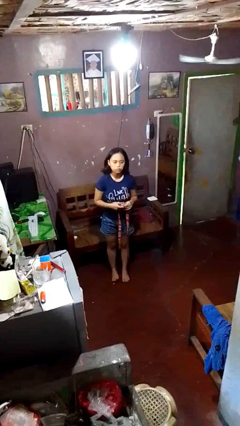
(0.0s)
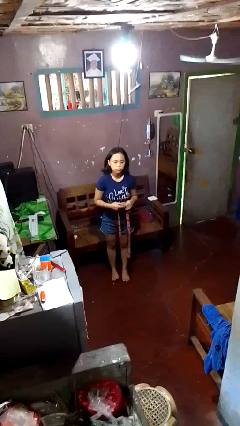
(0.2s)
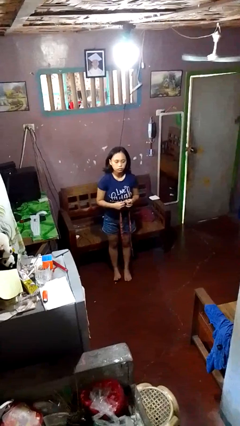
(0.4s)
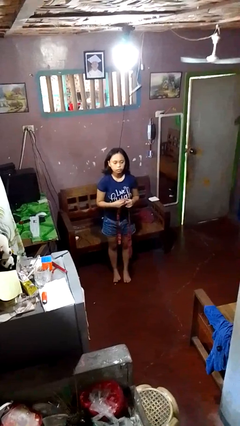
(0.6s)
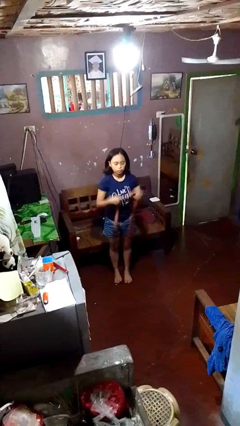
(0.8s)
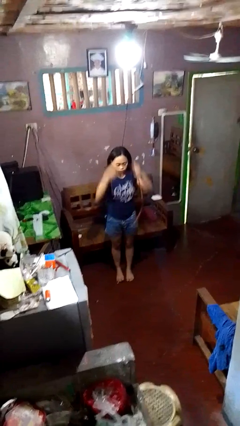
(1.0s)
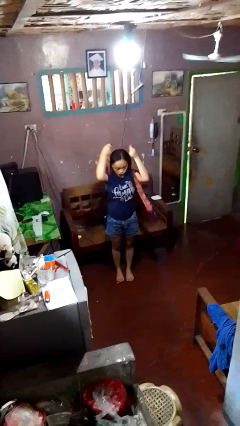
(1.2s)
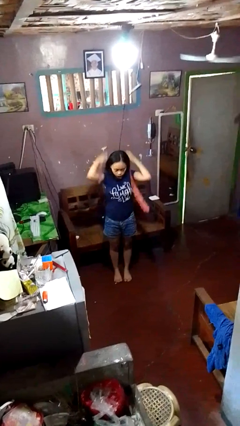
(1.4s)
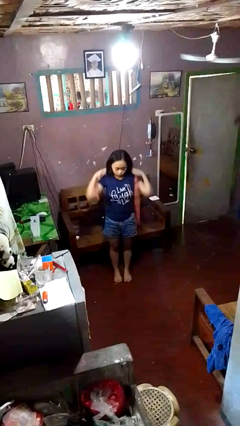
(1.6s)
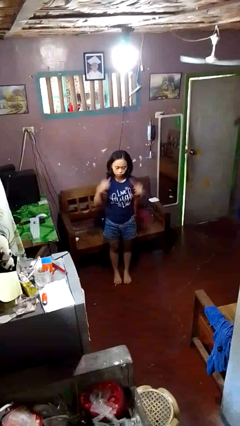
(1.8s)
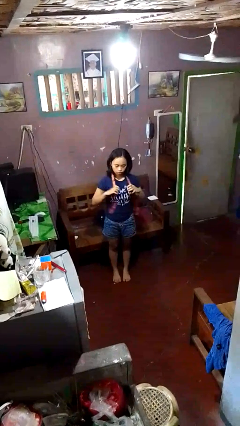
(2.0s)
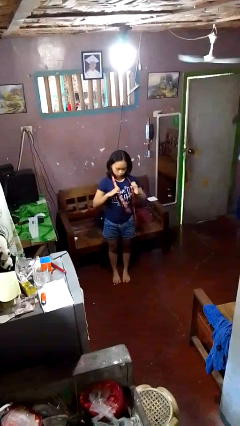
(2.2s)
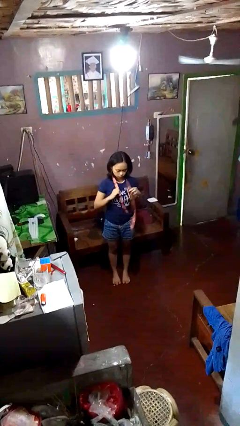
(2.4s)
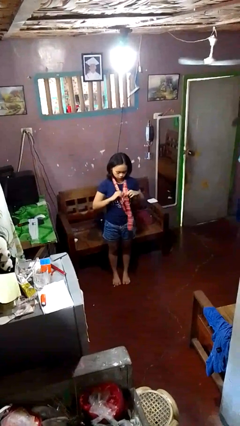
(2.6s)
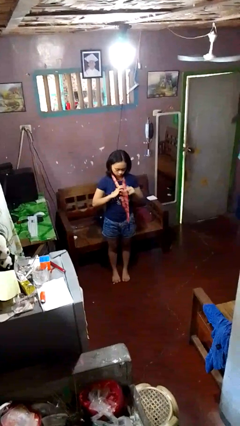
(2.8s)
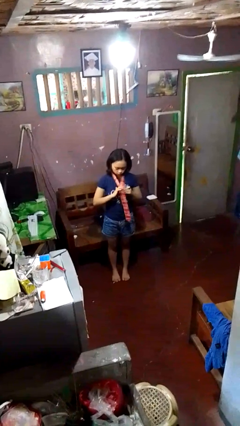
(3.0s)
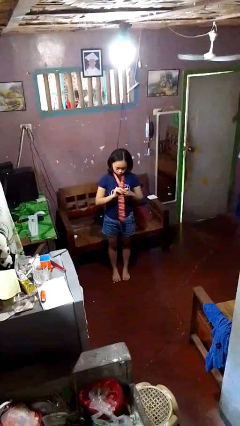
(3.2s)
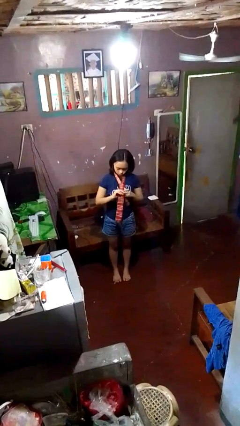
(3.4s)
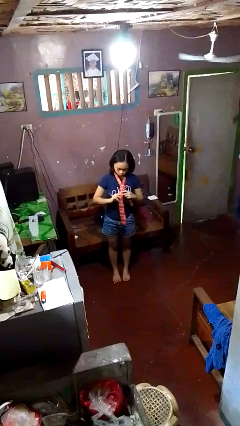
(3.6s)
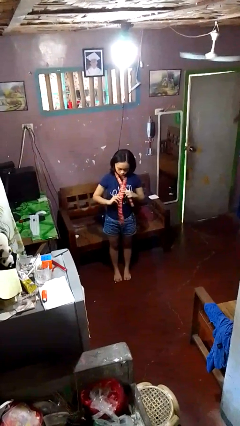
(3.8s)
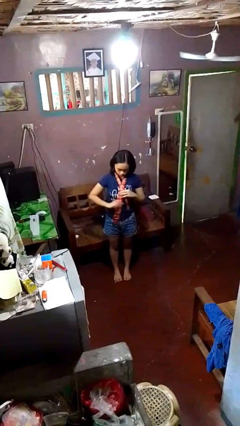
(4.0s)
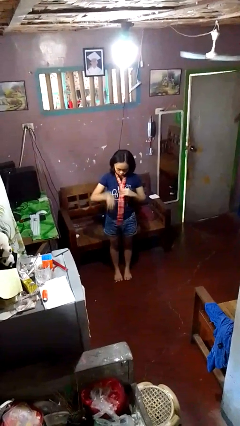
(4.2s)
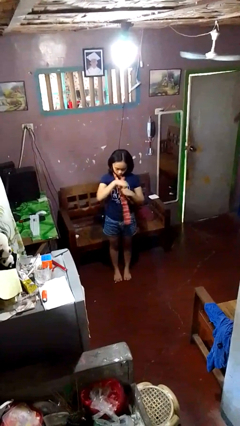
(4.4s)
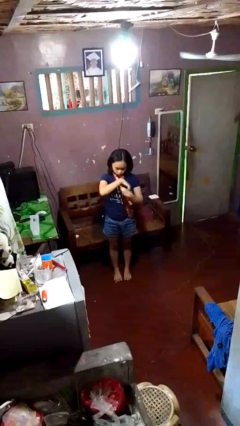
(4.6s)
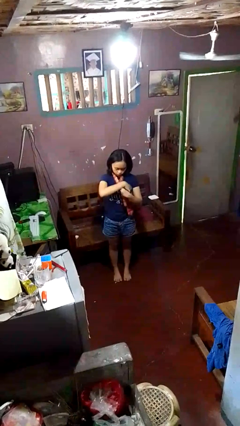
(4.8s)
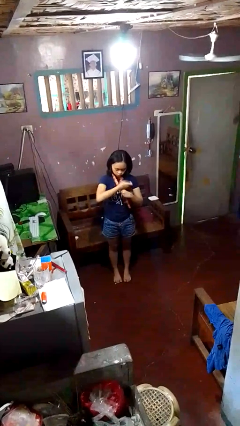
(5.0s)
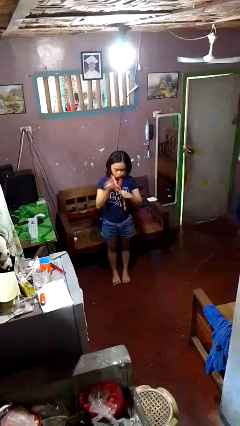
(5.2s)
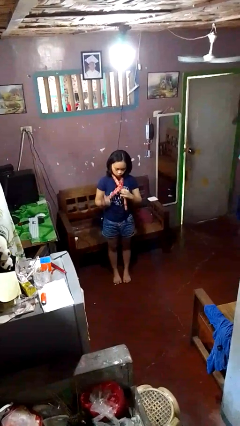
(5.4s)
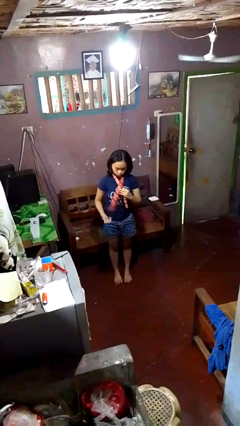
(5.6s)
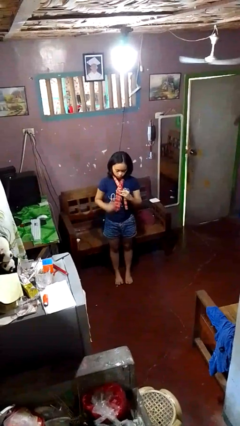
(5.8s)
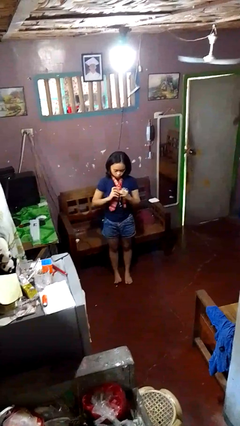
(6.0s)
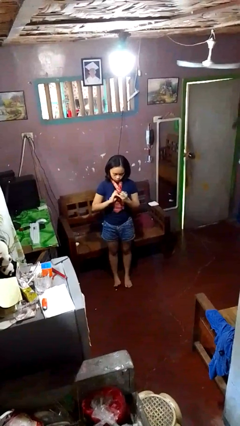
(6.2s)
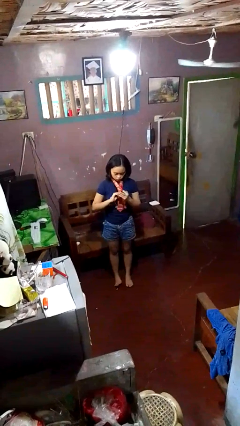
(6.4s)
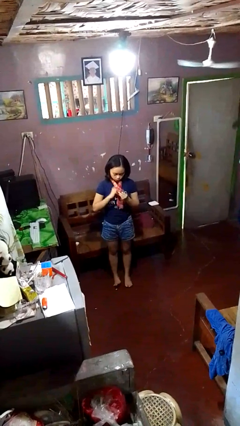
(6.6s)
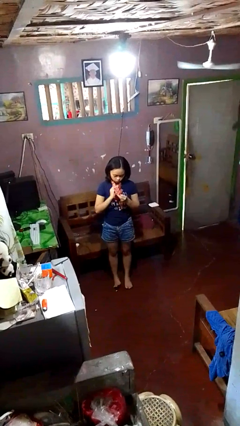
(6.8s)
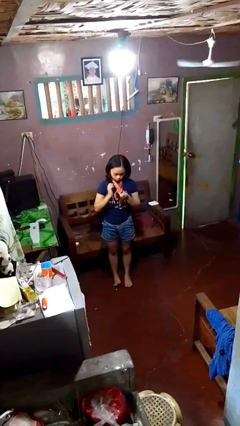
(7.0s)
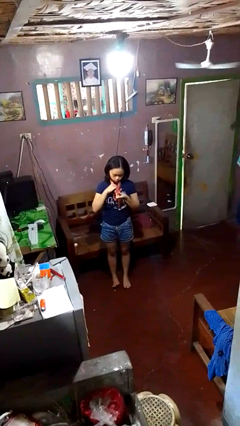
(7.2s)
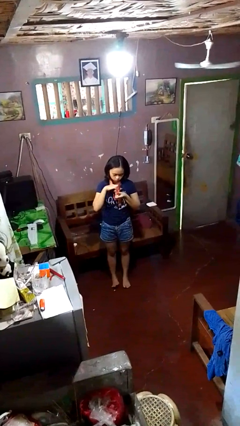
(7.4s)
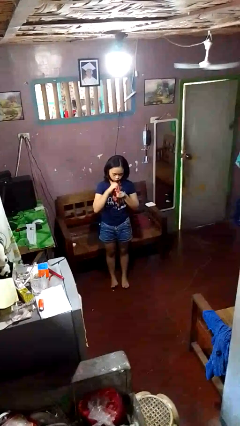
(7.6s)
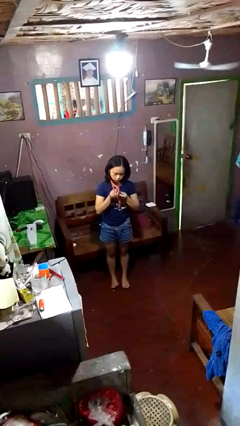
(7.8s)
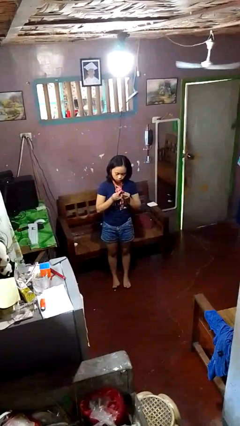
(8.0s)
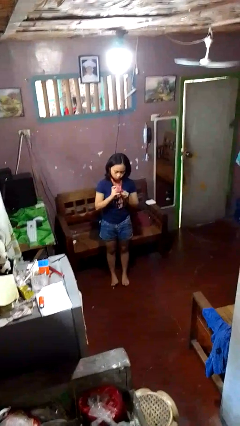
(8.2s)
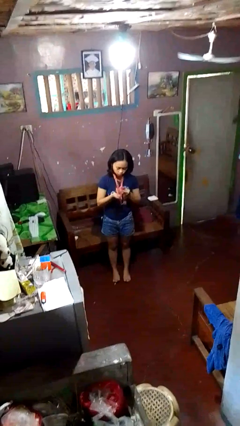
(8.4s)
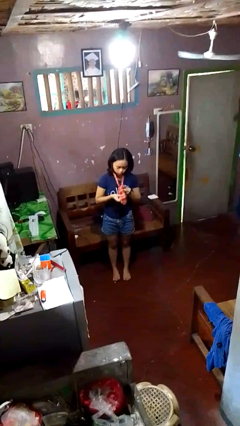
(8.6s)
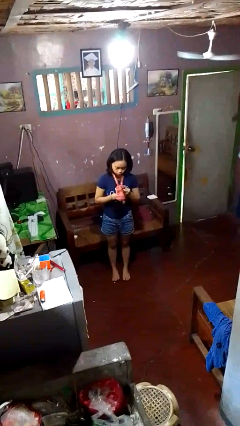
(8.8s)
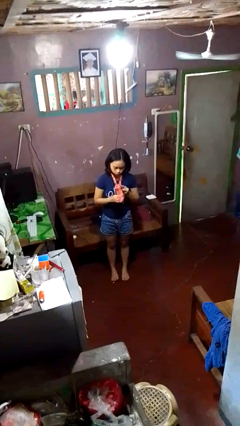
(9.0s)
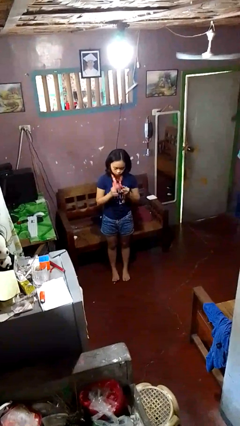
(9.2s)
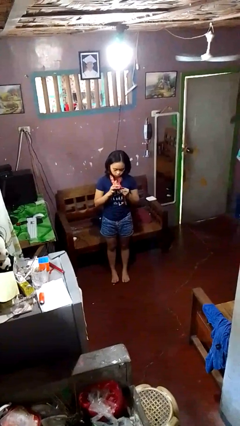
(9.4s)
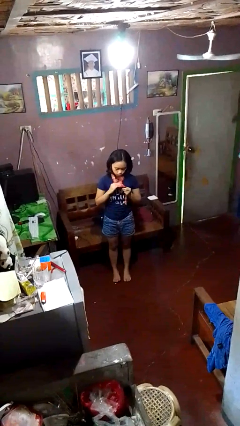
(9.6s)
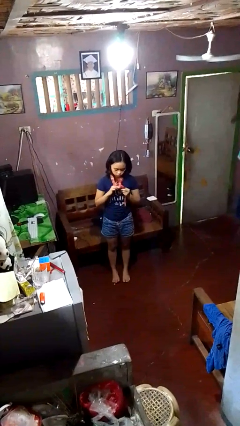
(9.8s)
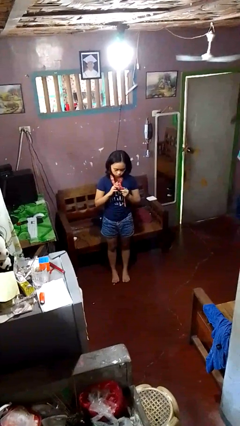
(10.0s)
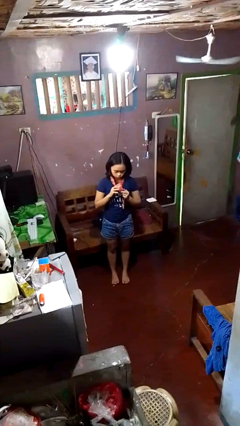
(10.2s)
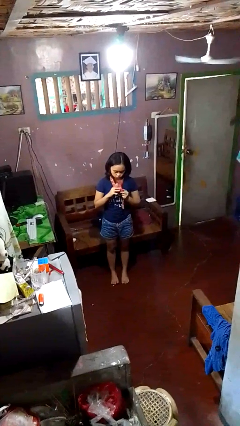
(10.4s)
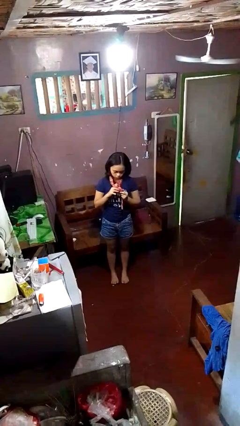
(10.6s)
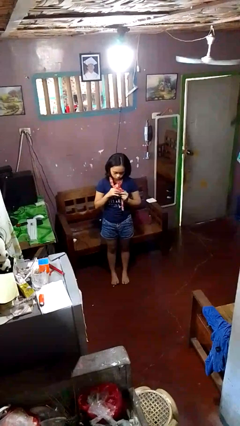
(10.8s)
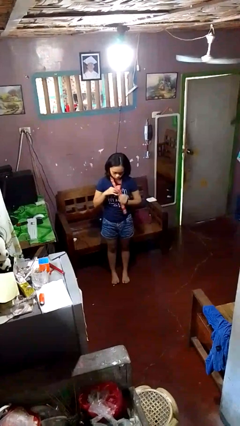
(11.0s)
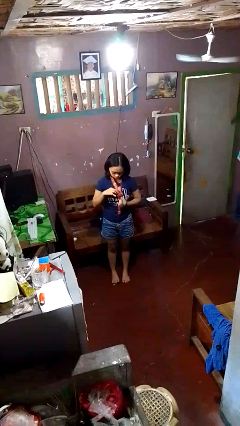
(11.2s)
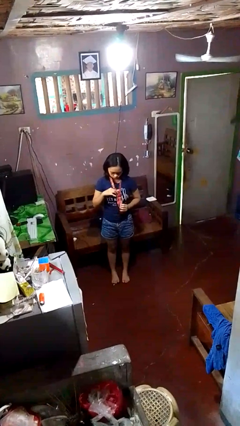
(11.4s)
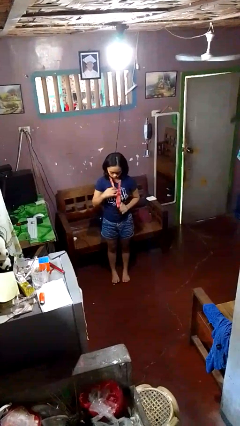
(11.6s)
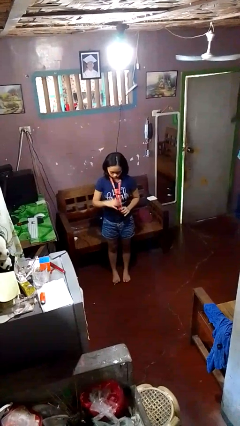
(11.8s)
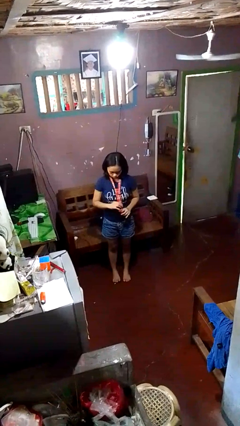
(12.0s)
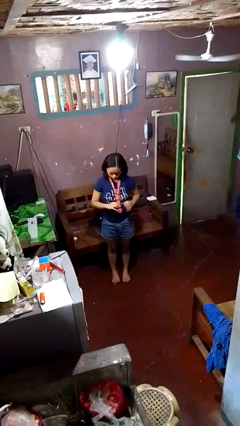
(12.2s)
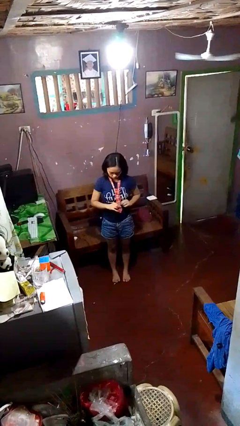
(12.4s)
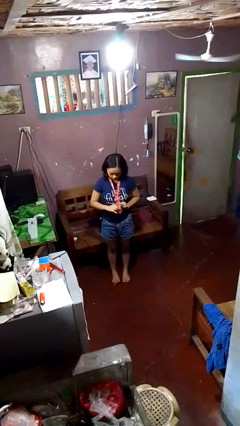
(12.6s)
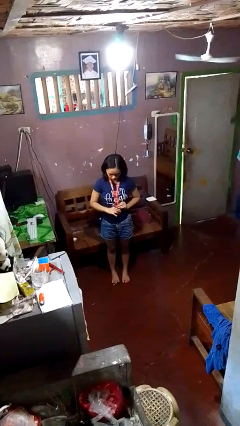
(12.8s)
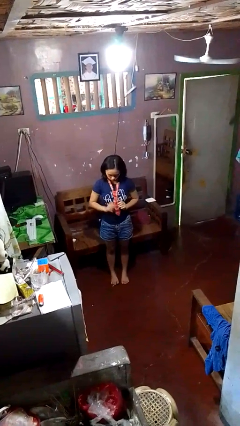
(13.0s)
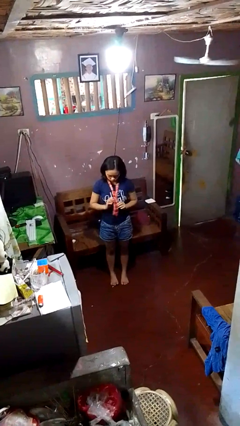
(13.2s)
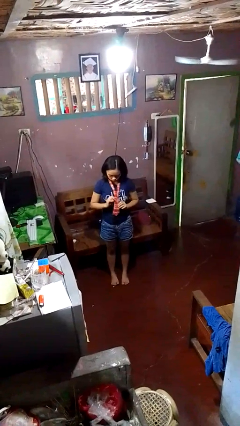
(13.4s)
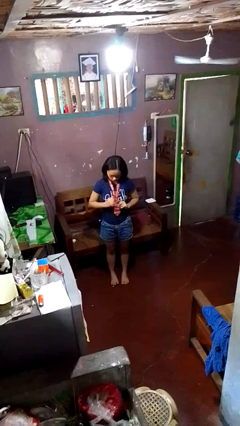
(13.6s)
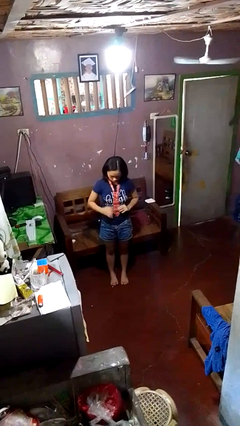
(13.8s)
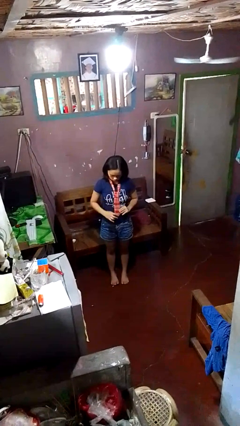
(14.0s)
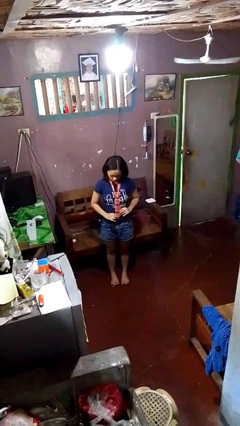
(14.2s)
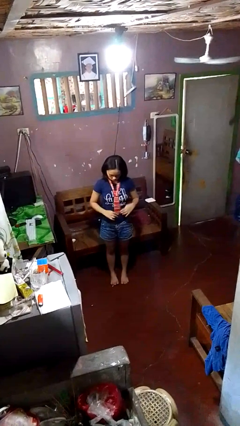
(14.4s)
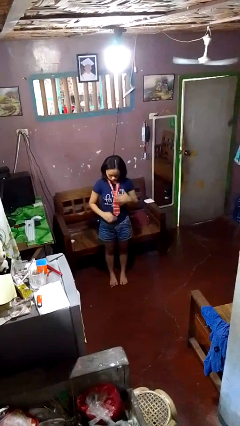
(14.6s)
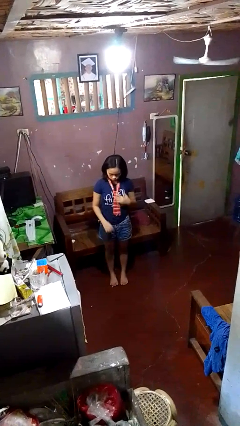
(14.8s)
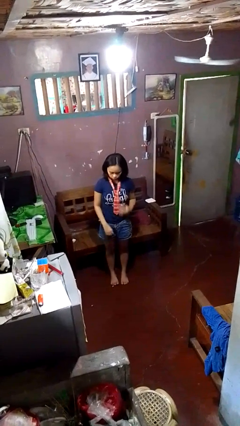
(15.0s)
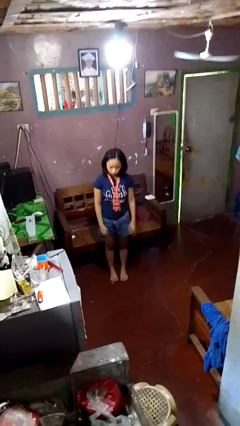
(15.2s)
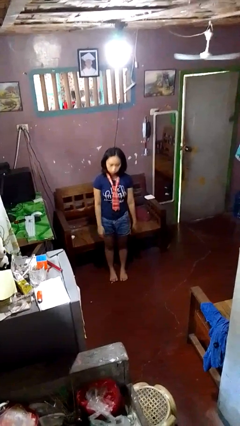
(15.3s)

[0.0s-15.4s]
person puts on necktie

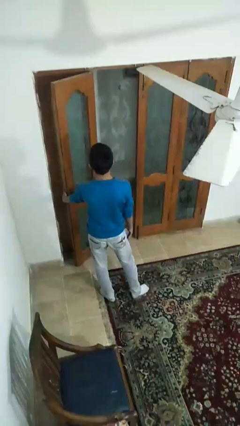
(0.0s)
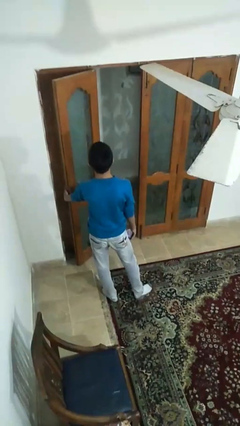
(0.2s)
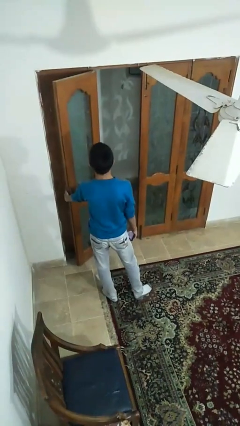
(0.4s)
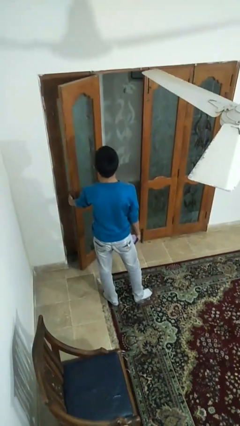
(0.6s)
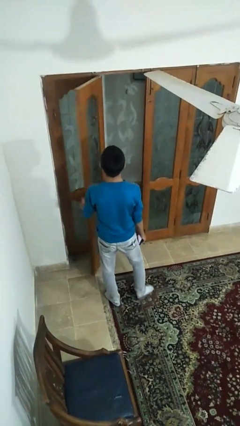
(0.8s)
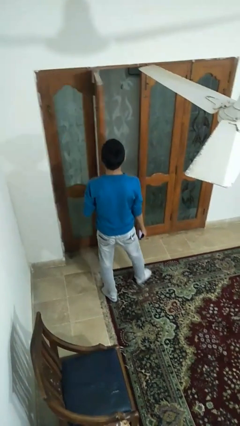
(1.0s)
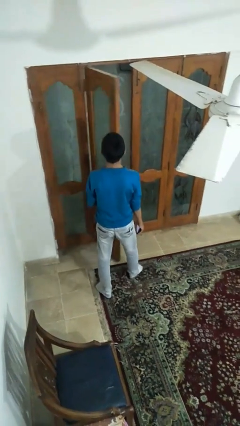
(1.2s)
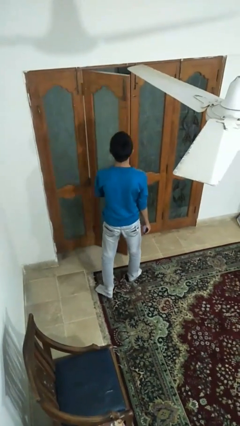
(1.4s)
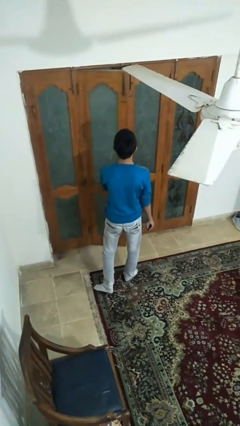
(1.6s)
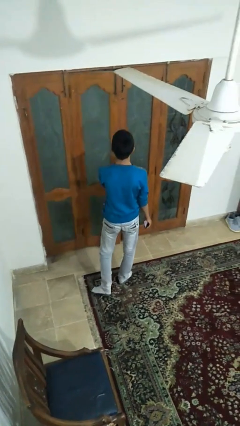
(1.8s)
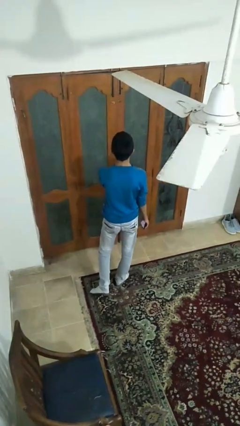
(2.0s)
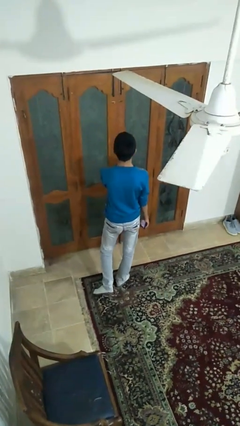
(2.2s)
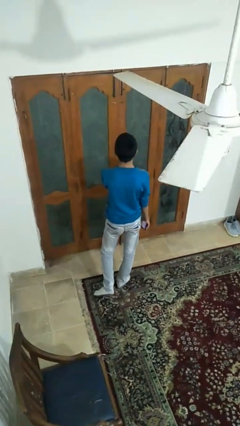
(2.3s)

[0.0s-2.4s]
person closes facility door

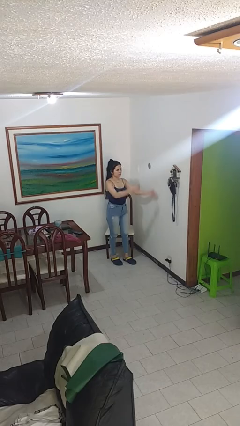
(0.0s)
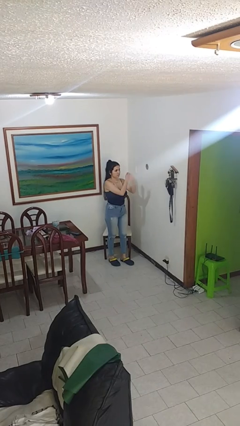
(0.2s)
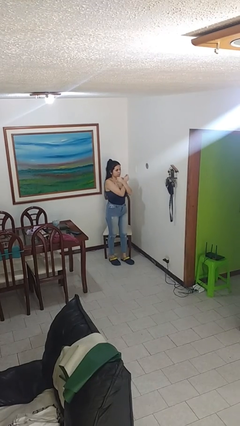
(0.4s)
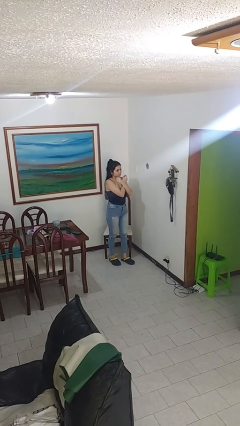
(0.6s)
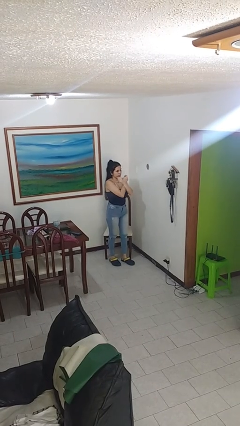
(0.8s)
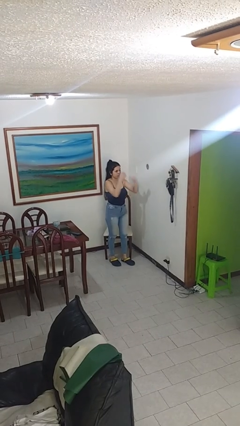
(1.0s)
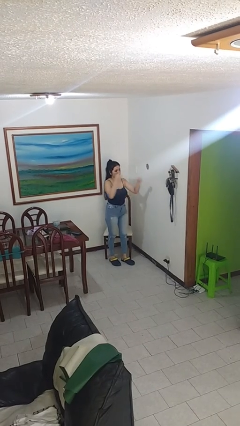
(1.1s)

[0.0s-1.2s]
person gestures arms x
